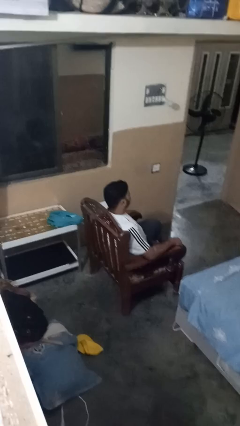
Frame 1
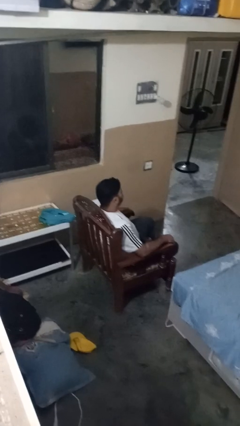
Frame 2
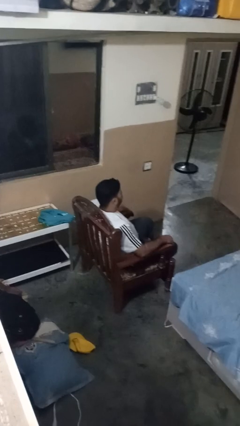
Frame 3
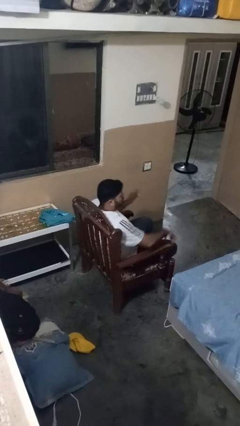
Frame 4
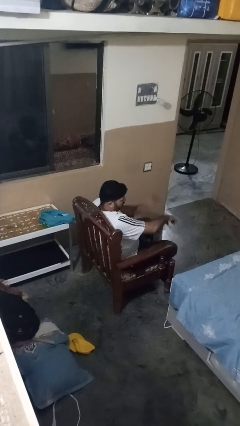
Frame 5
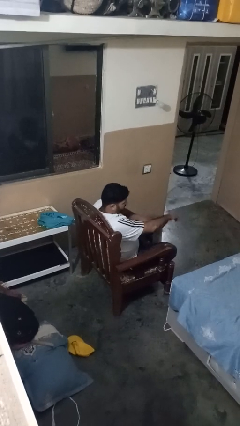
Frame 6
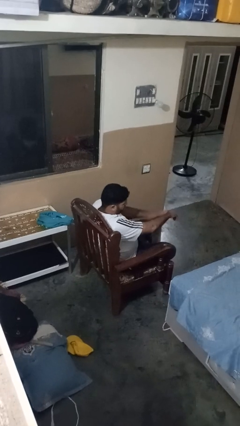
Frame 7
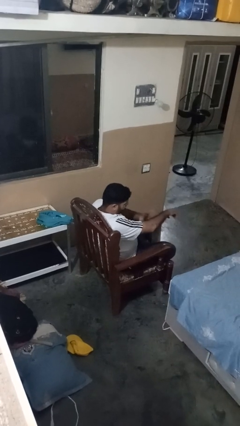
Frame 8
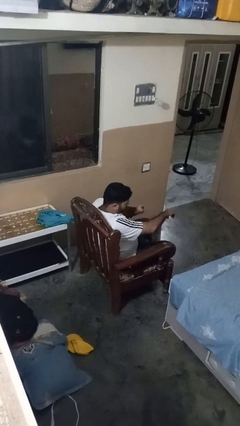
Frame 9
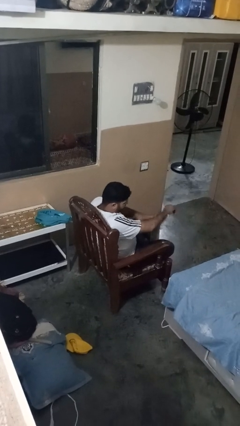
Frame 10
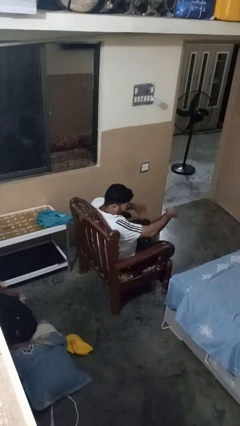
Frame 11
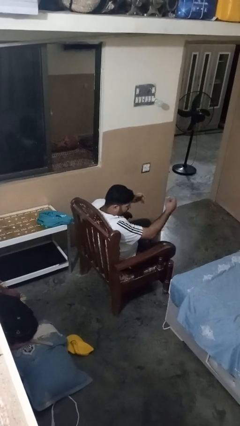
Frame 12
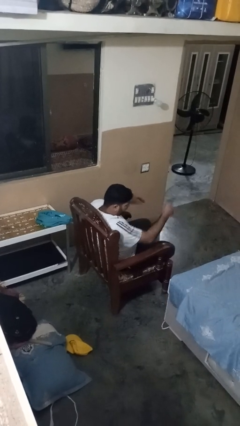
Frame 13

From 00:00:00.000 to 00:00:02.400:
person swats bug

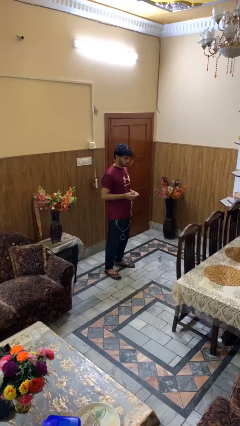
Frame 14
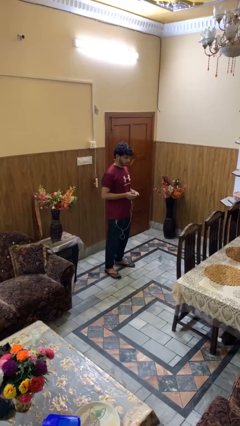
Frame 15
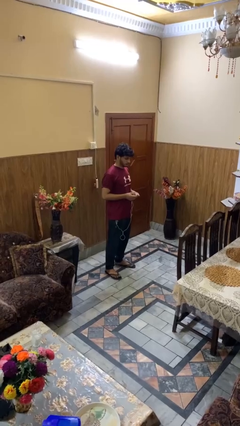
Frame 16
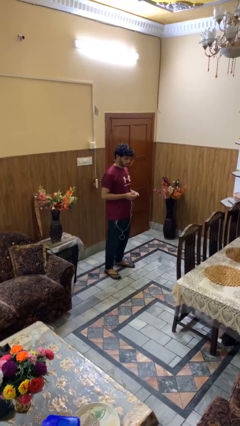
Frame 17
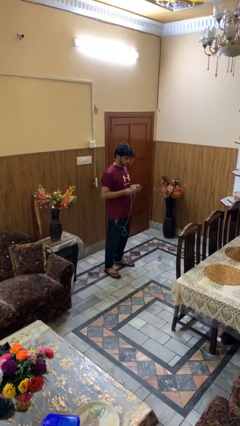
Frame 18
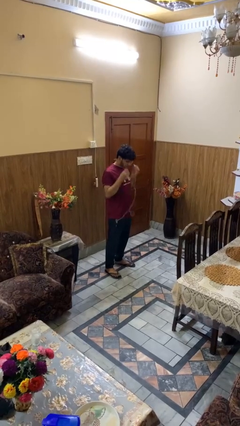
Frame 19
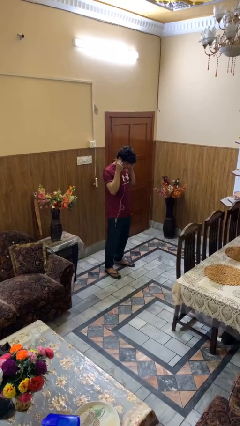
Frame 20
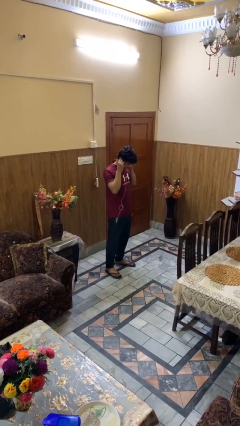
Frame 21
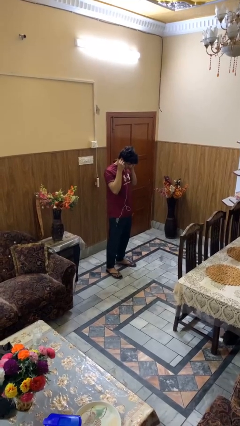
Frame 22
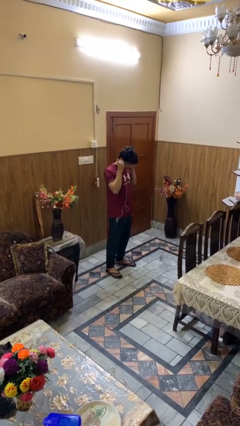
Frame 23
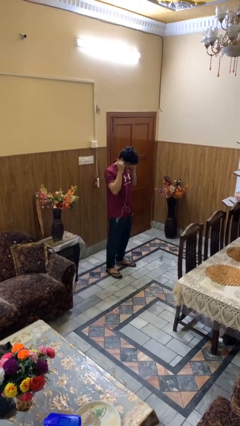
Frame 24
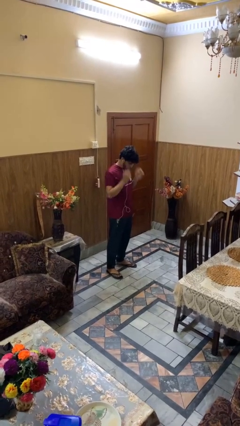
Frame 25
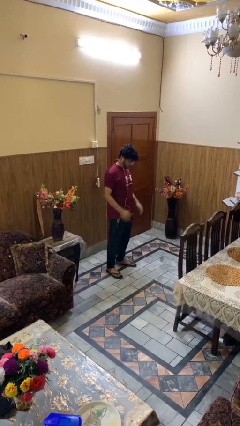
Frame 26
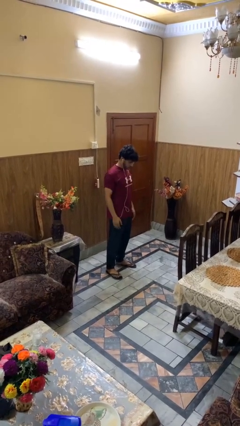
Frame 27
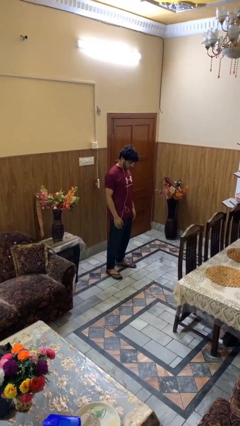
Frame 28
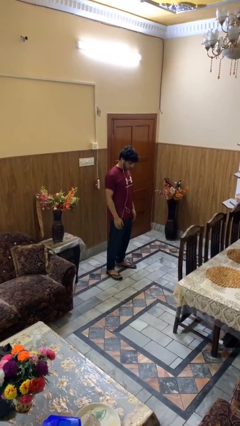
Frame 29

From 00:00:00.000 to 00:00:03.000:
person puts on glasses

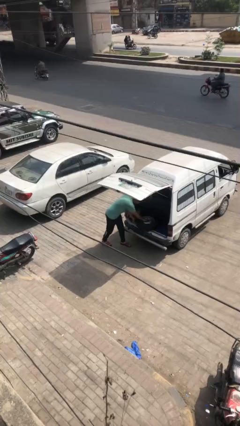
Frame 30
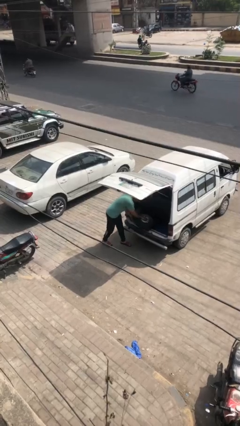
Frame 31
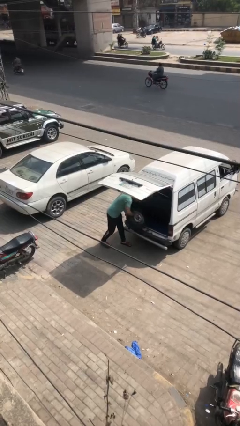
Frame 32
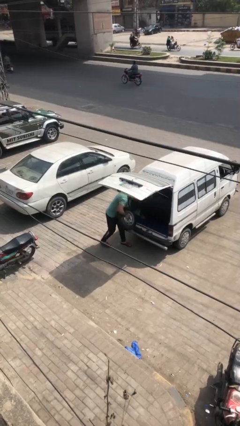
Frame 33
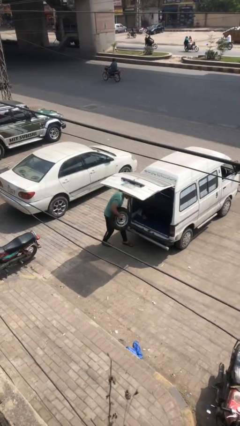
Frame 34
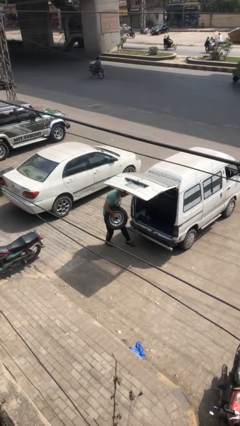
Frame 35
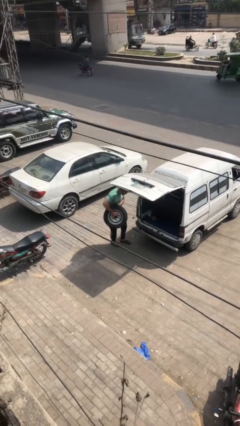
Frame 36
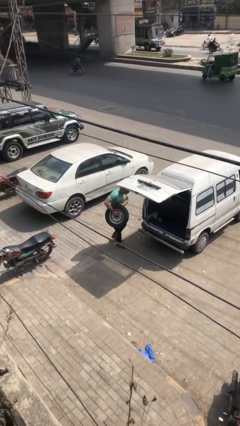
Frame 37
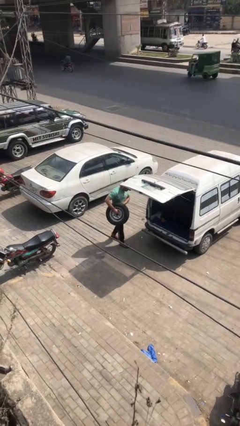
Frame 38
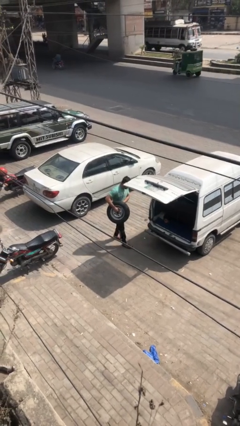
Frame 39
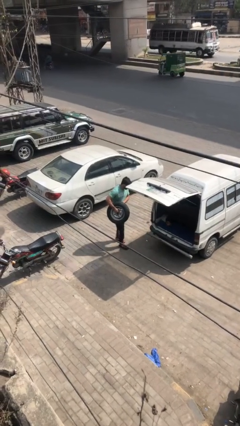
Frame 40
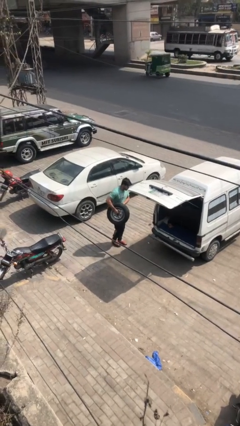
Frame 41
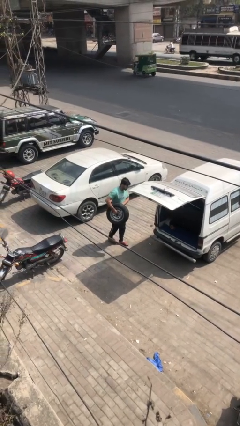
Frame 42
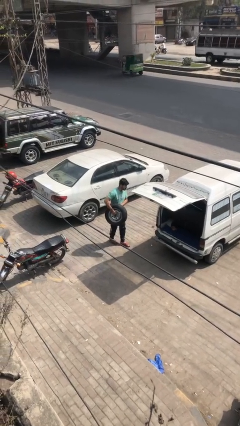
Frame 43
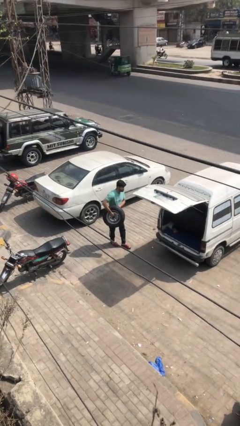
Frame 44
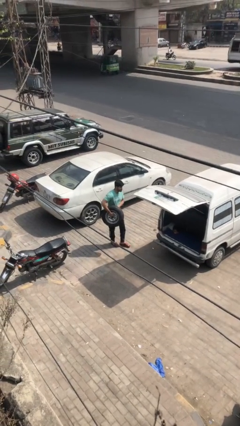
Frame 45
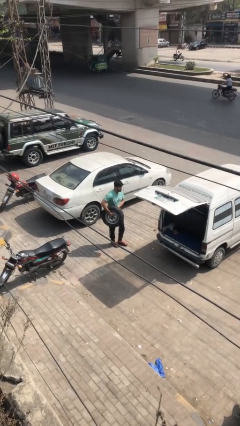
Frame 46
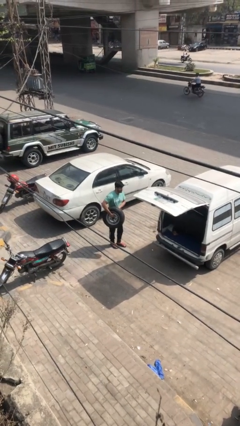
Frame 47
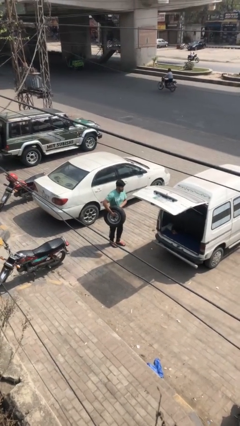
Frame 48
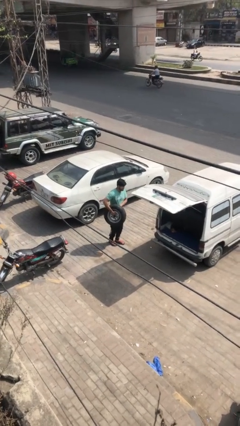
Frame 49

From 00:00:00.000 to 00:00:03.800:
person unloads car

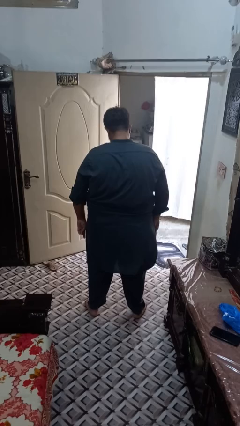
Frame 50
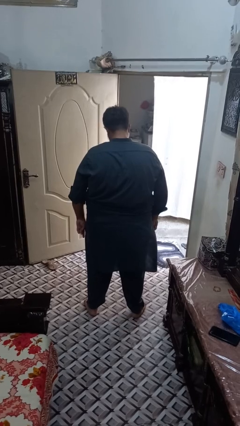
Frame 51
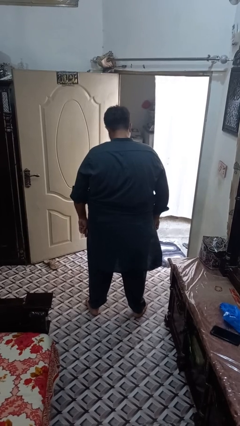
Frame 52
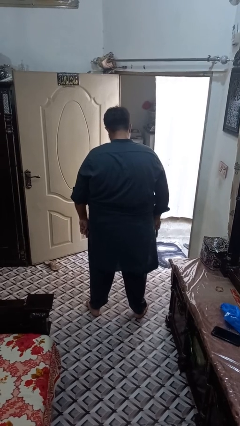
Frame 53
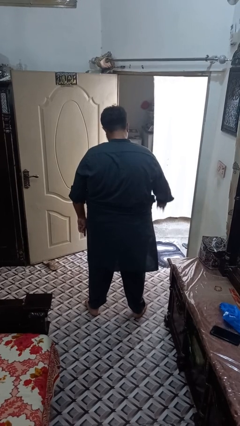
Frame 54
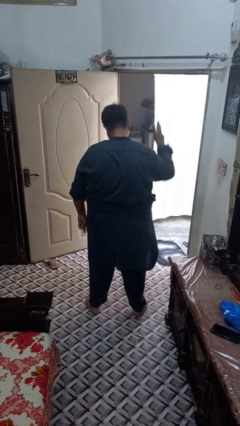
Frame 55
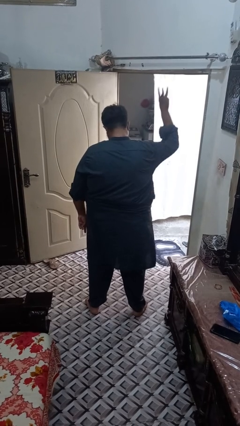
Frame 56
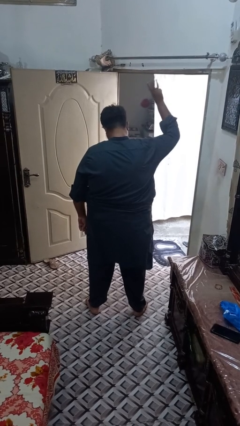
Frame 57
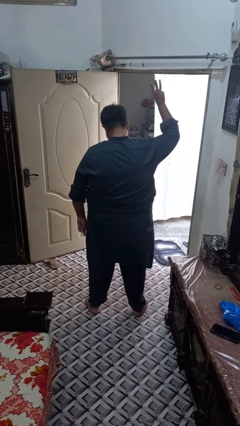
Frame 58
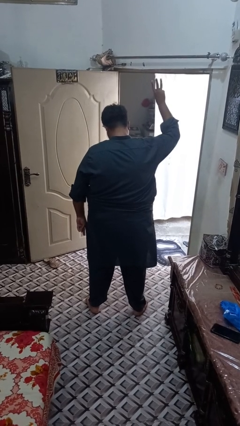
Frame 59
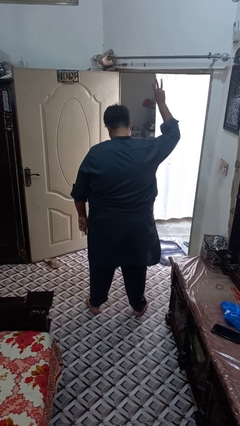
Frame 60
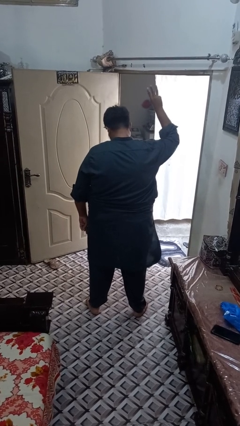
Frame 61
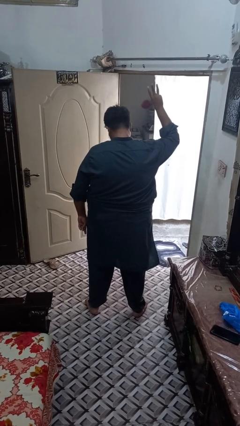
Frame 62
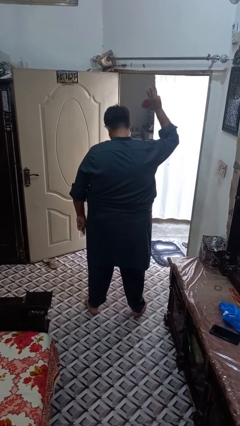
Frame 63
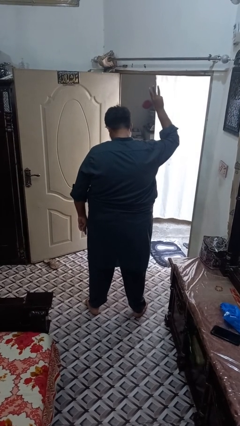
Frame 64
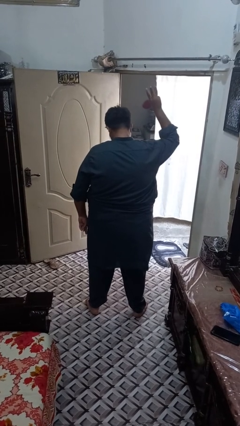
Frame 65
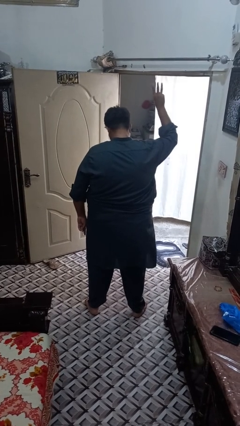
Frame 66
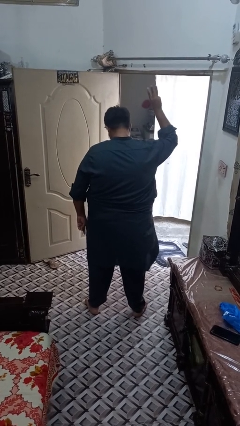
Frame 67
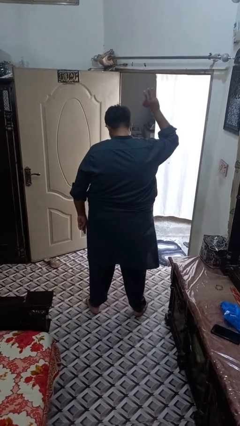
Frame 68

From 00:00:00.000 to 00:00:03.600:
person gestures number three

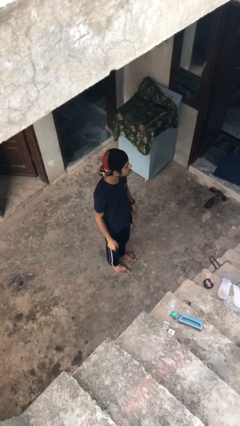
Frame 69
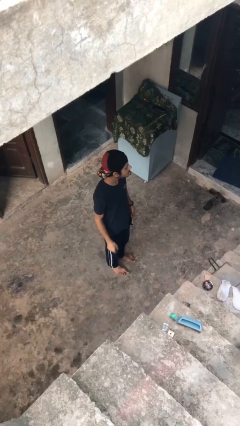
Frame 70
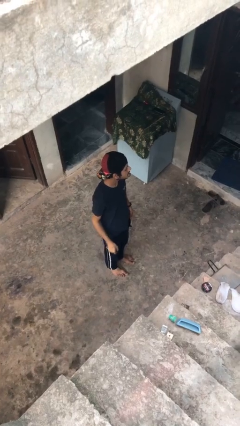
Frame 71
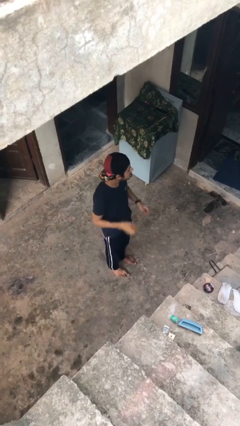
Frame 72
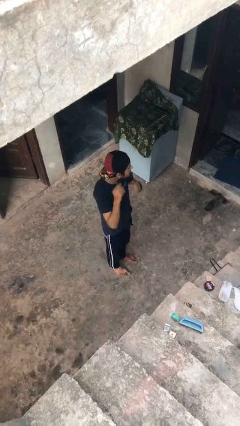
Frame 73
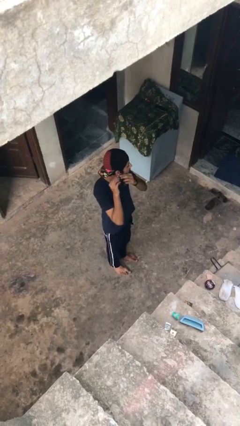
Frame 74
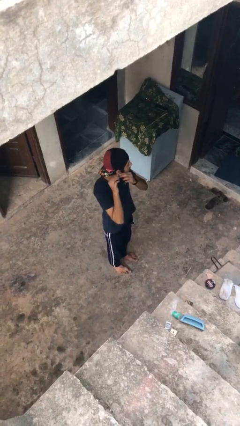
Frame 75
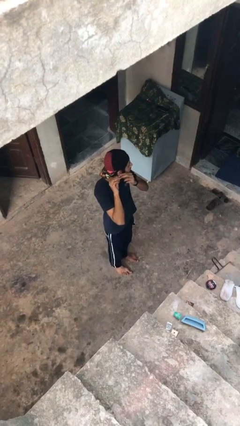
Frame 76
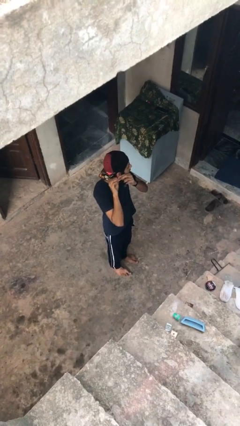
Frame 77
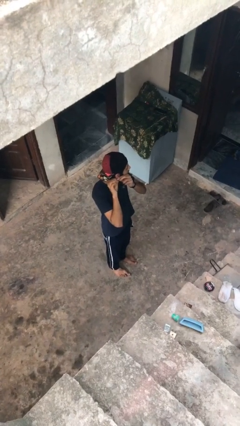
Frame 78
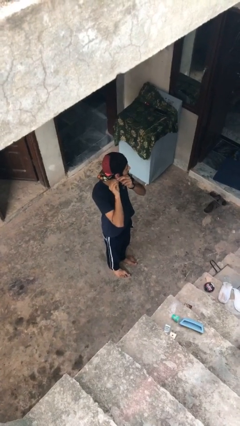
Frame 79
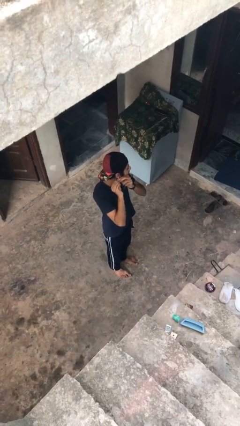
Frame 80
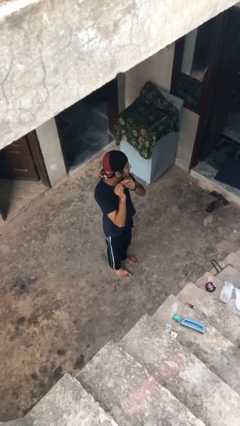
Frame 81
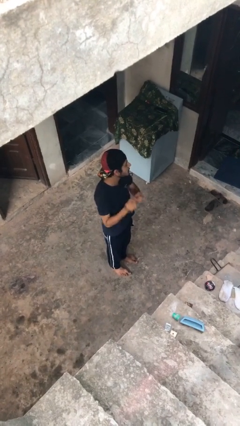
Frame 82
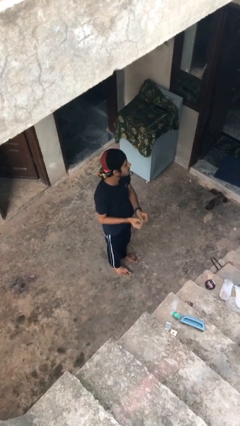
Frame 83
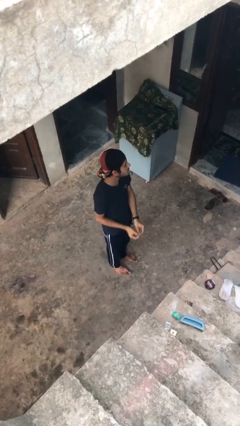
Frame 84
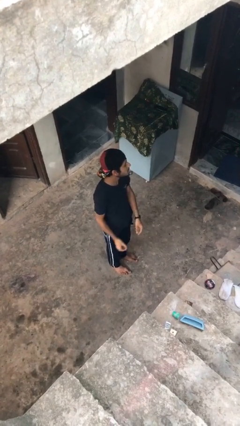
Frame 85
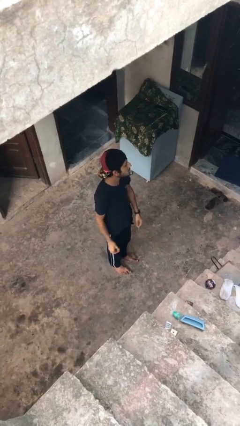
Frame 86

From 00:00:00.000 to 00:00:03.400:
person takes off earrings

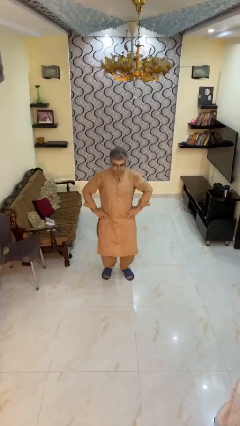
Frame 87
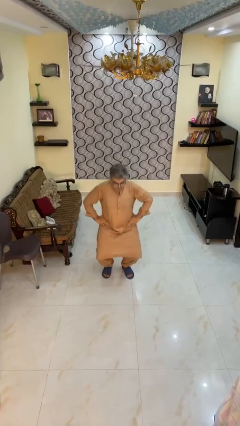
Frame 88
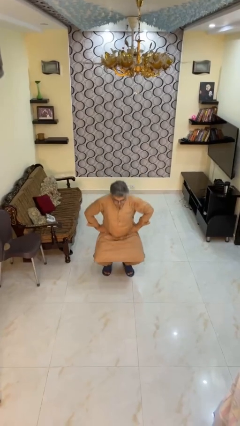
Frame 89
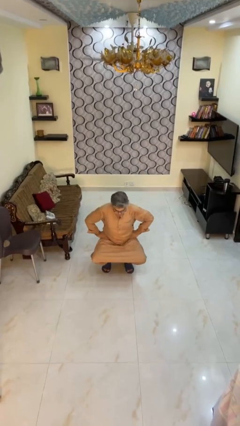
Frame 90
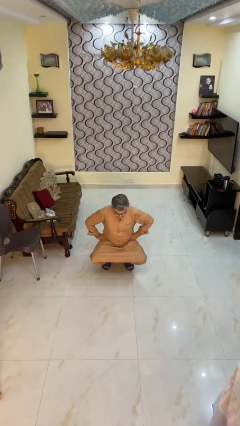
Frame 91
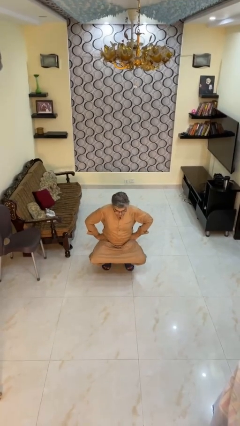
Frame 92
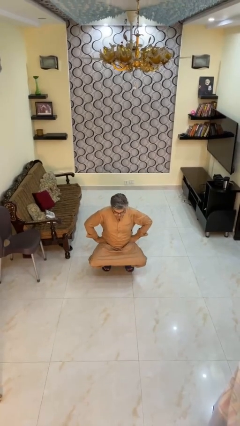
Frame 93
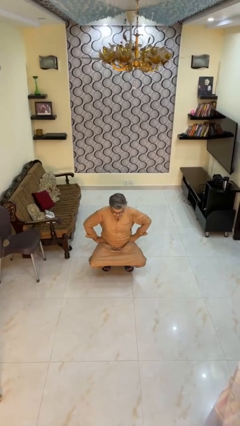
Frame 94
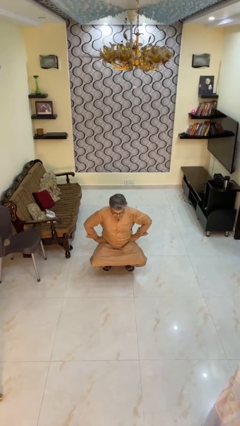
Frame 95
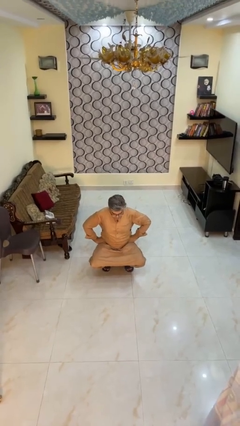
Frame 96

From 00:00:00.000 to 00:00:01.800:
person squats
